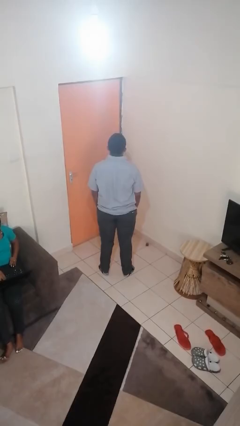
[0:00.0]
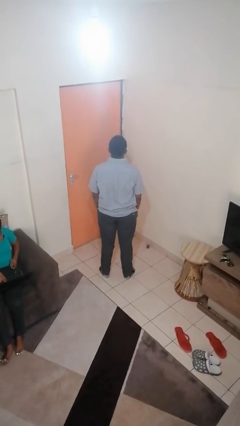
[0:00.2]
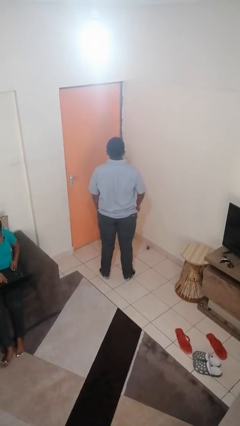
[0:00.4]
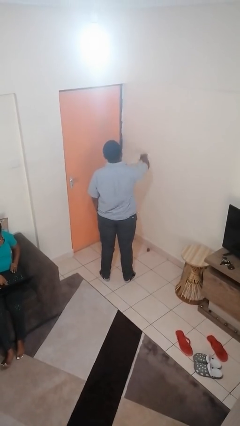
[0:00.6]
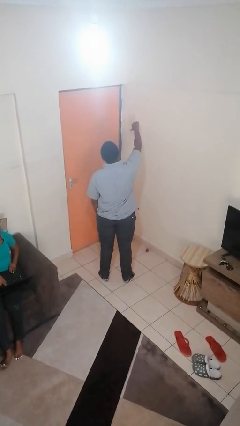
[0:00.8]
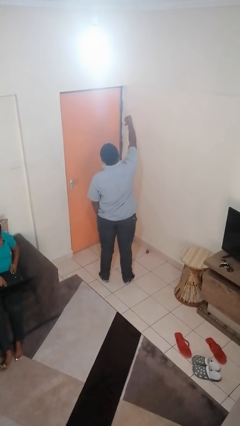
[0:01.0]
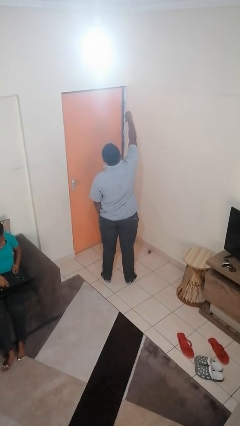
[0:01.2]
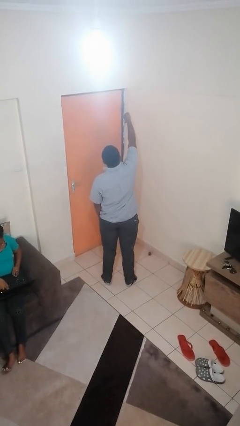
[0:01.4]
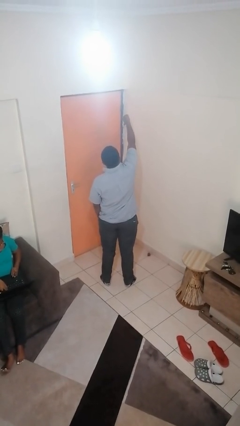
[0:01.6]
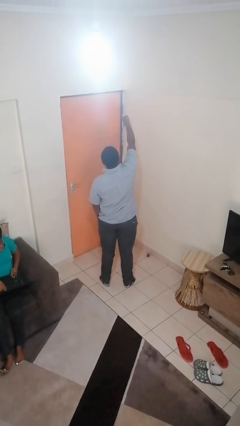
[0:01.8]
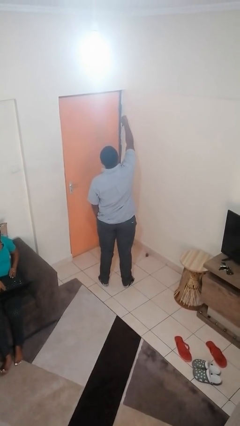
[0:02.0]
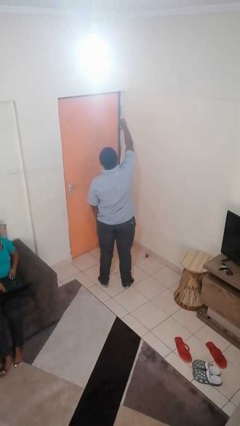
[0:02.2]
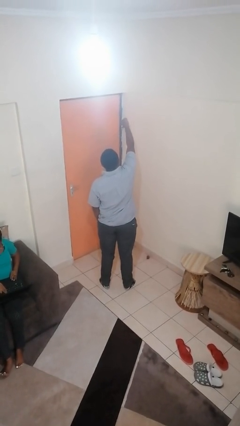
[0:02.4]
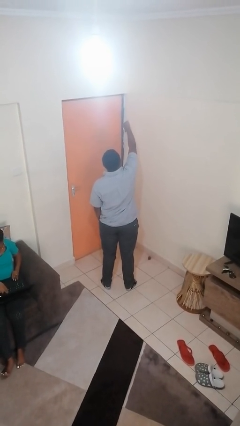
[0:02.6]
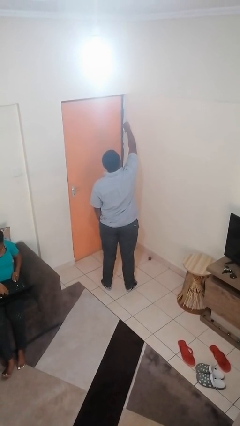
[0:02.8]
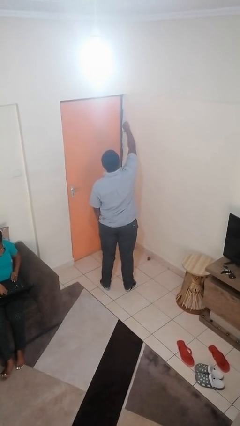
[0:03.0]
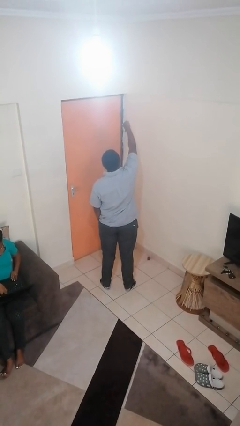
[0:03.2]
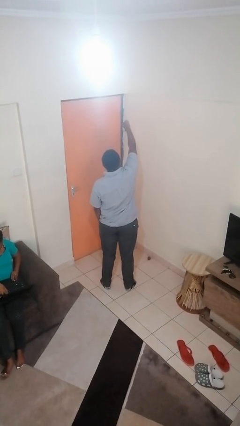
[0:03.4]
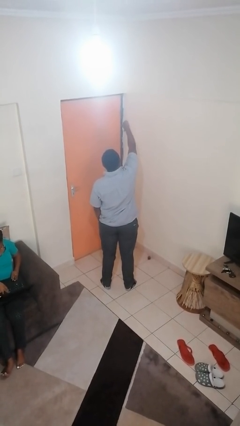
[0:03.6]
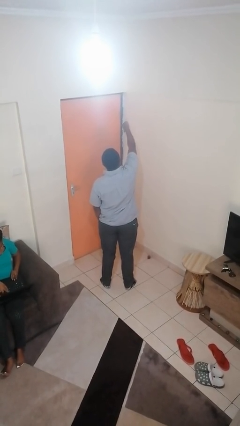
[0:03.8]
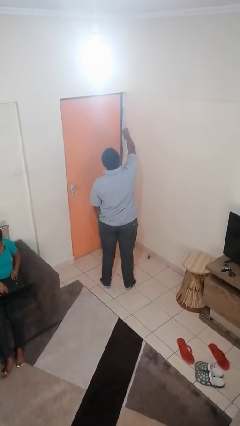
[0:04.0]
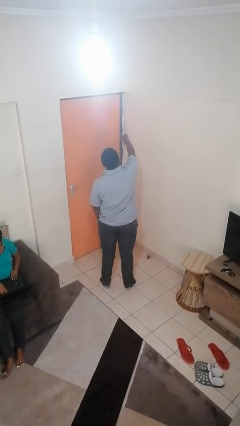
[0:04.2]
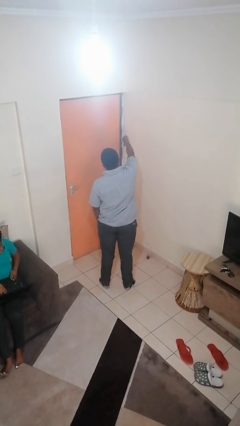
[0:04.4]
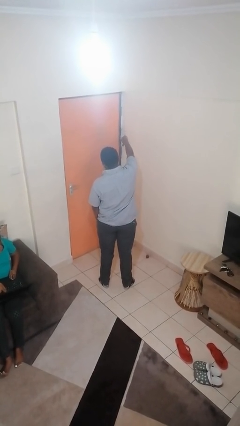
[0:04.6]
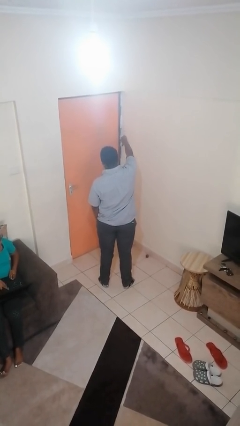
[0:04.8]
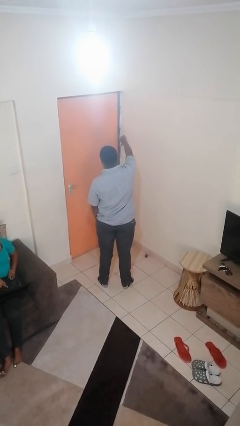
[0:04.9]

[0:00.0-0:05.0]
person gestures thumbs down

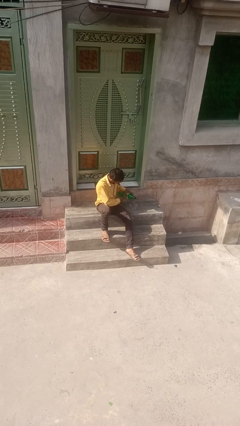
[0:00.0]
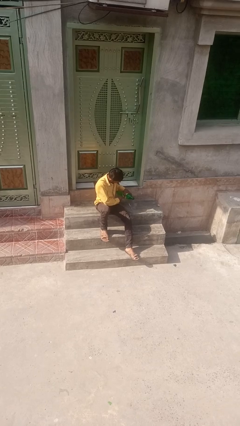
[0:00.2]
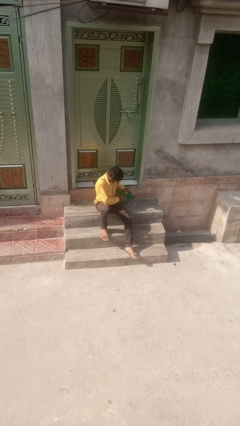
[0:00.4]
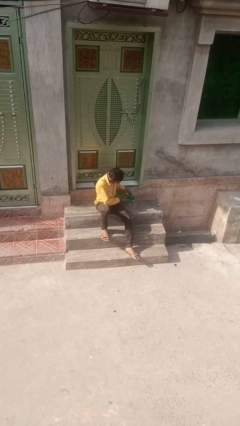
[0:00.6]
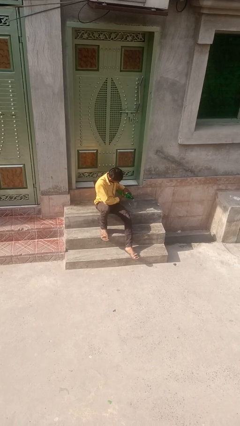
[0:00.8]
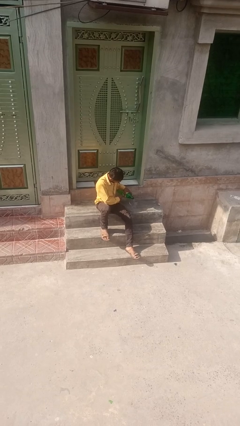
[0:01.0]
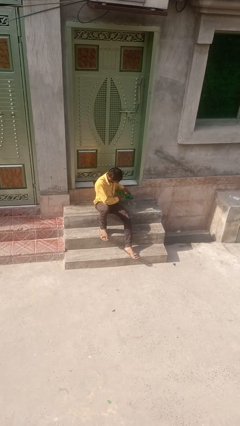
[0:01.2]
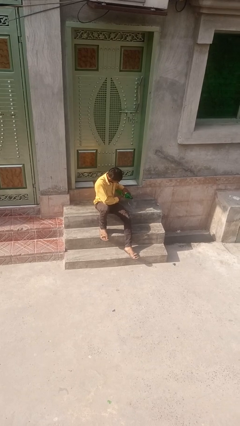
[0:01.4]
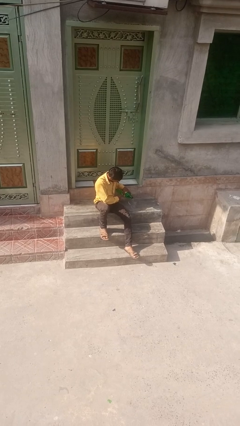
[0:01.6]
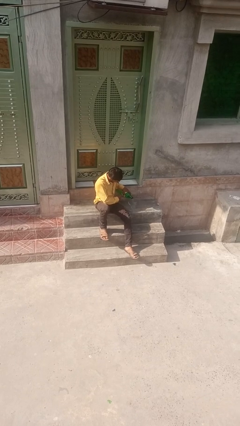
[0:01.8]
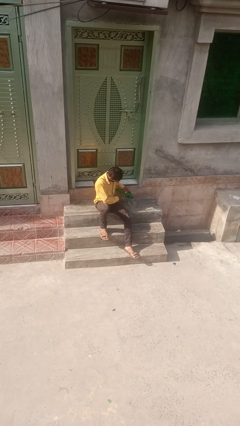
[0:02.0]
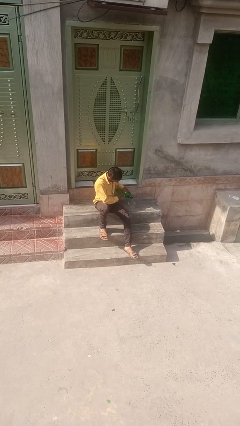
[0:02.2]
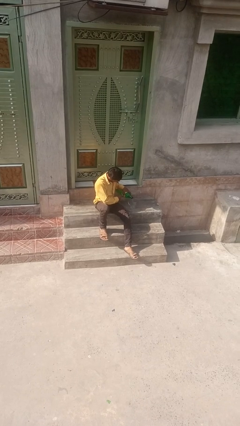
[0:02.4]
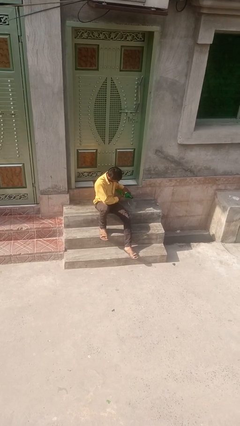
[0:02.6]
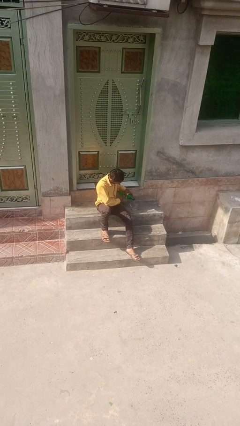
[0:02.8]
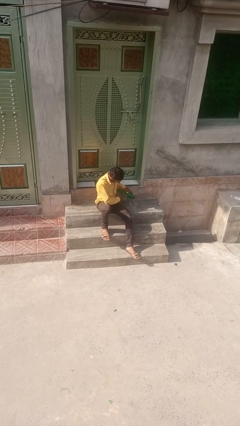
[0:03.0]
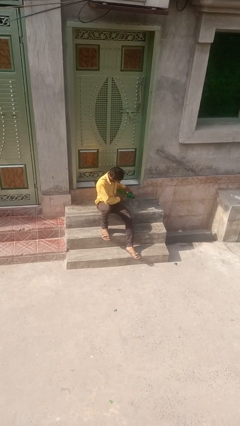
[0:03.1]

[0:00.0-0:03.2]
person pours liquid into cup

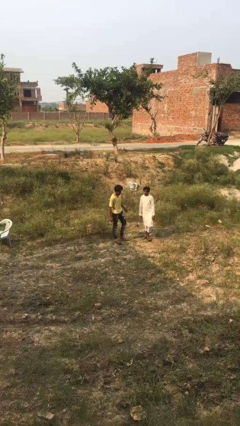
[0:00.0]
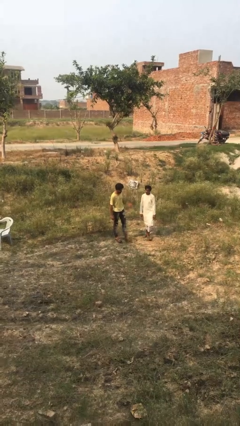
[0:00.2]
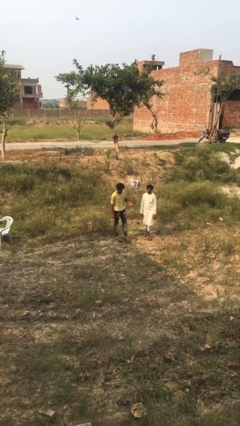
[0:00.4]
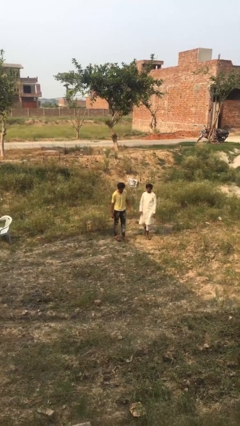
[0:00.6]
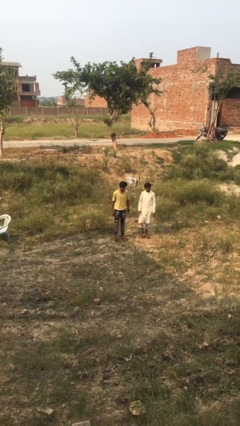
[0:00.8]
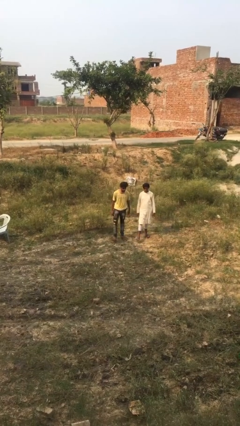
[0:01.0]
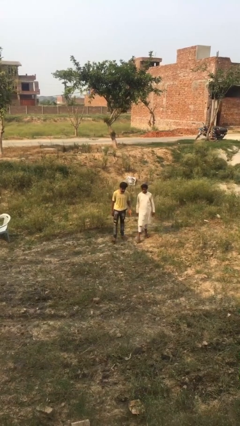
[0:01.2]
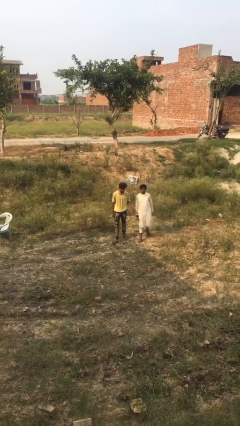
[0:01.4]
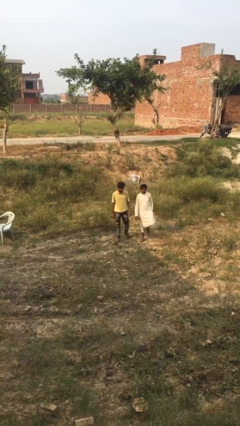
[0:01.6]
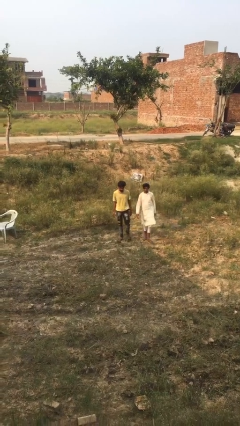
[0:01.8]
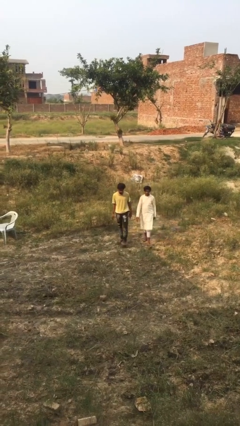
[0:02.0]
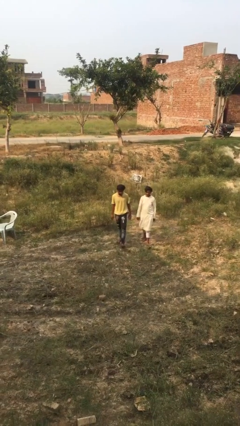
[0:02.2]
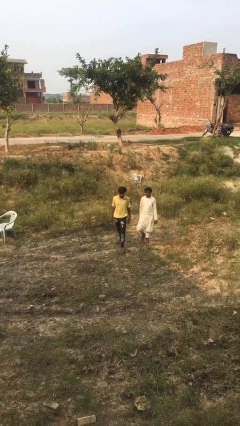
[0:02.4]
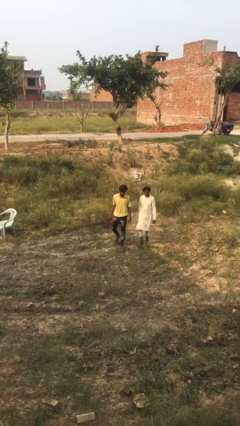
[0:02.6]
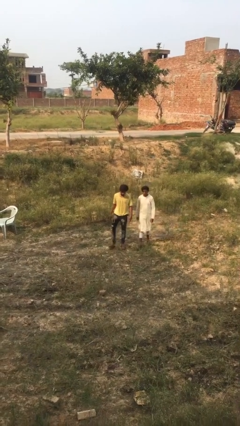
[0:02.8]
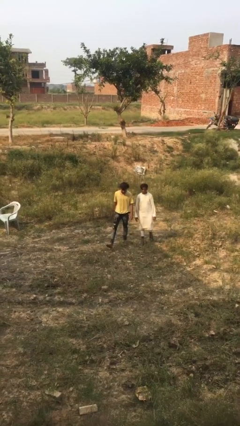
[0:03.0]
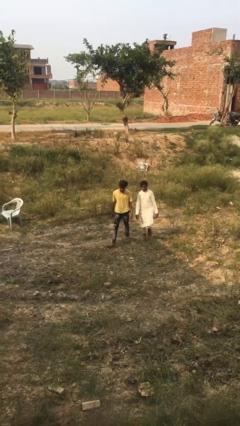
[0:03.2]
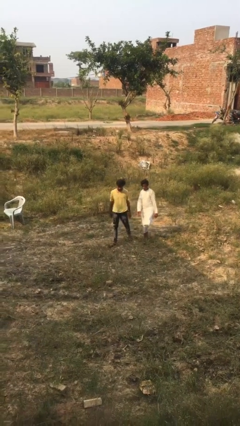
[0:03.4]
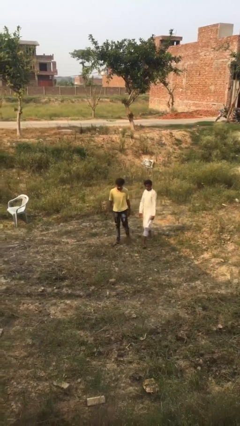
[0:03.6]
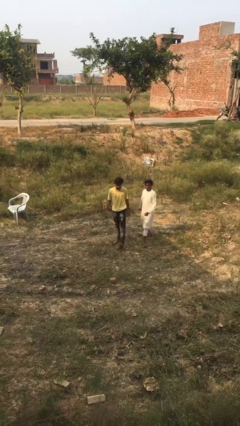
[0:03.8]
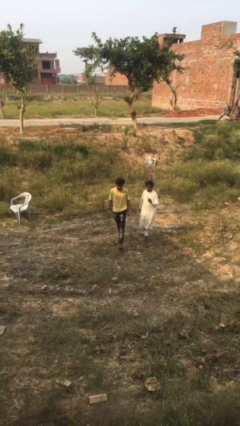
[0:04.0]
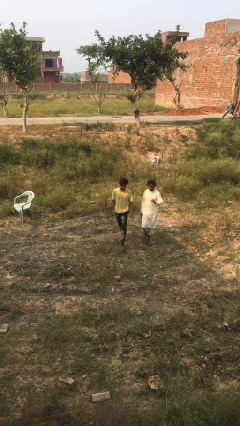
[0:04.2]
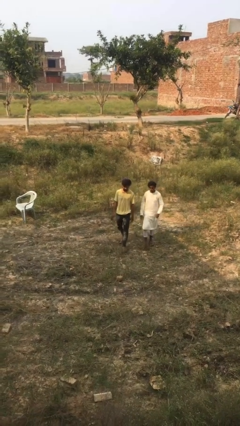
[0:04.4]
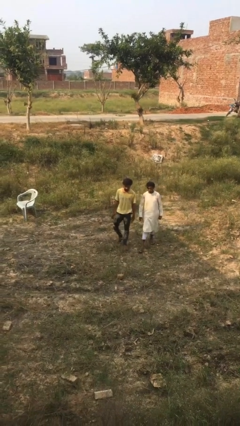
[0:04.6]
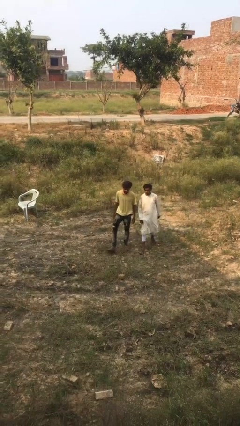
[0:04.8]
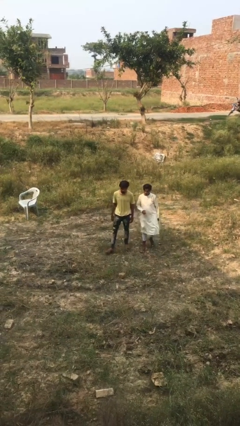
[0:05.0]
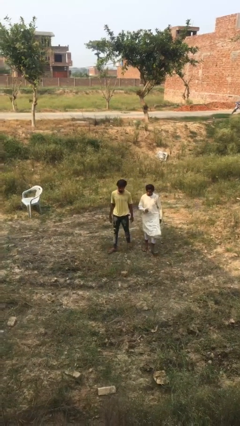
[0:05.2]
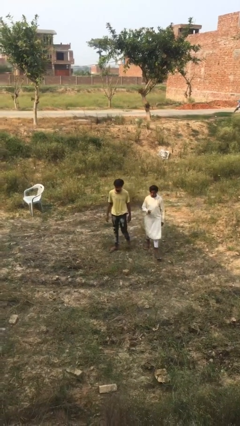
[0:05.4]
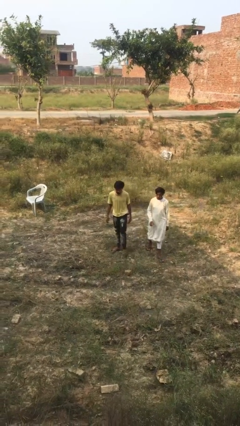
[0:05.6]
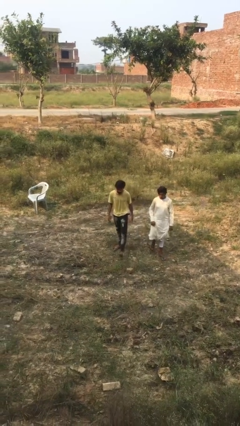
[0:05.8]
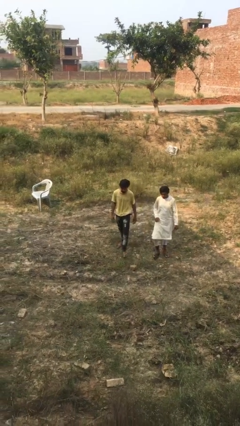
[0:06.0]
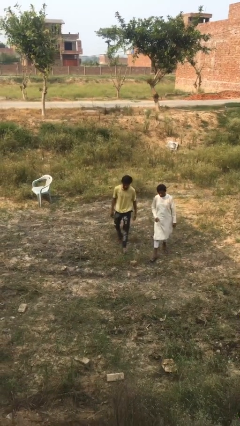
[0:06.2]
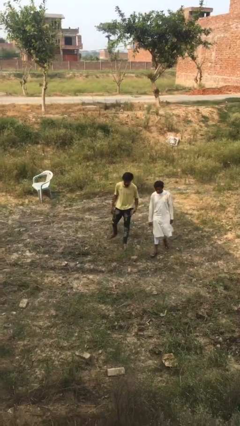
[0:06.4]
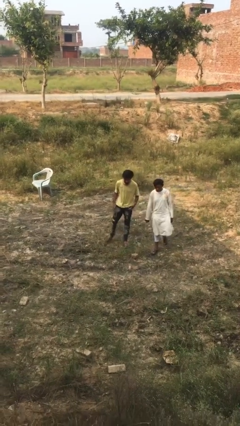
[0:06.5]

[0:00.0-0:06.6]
person talks to person

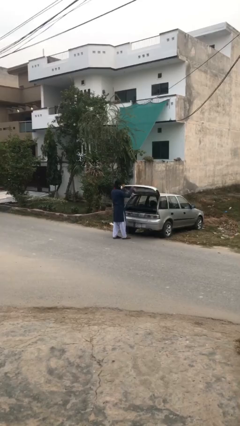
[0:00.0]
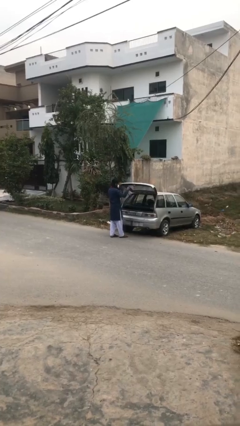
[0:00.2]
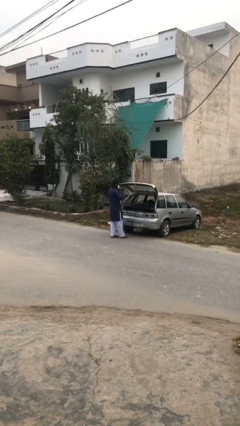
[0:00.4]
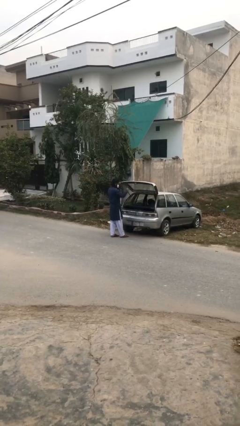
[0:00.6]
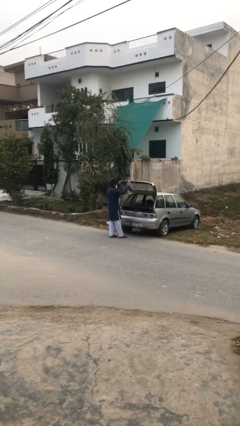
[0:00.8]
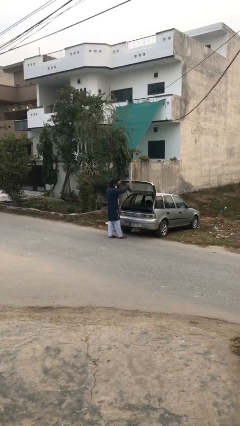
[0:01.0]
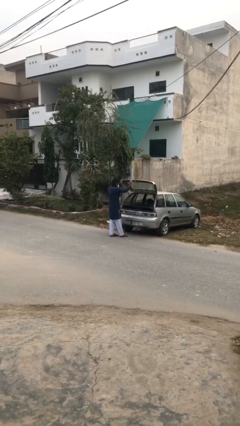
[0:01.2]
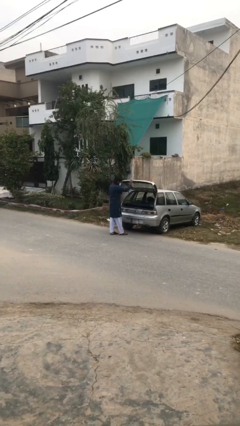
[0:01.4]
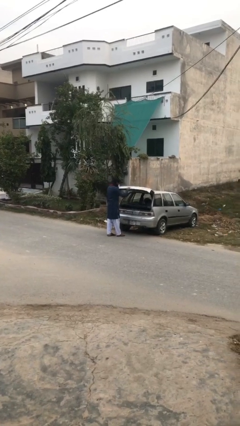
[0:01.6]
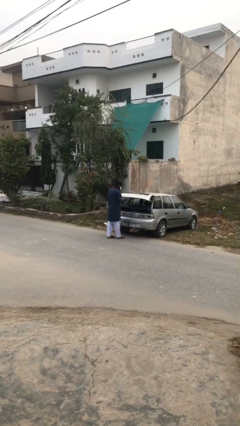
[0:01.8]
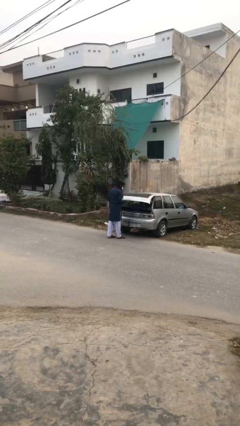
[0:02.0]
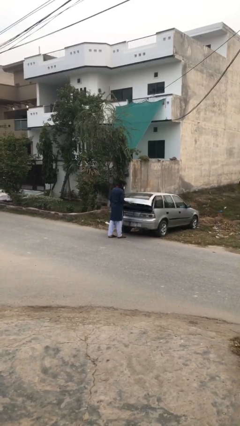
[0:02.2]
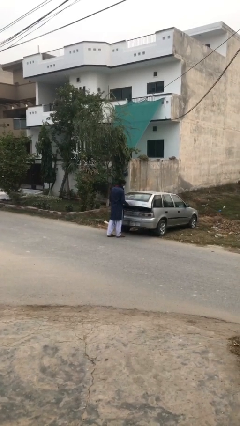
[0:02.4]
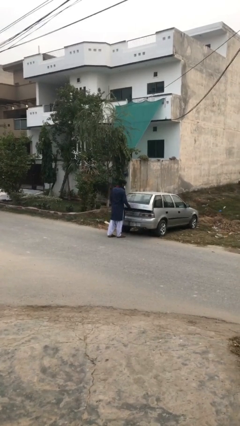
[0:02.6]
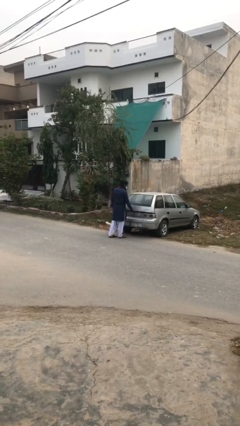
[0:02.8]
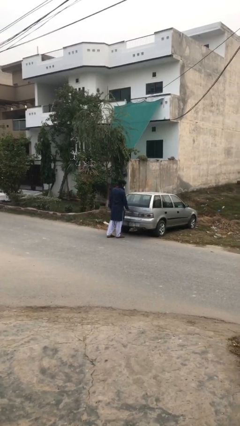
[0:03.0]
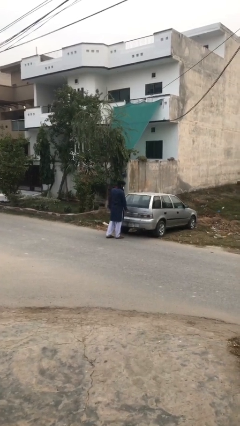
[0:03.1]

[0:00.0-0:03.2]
person closes car trunk
